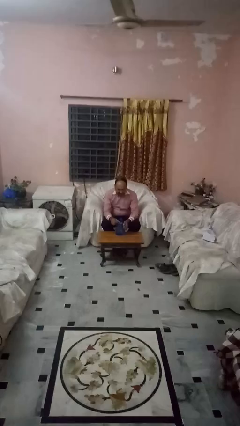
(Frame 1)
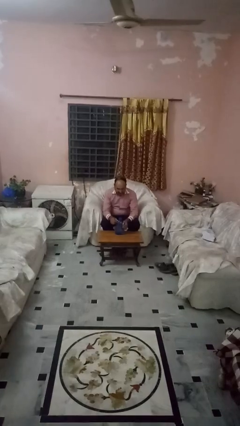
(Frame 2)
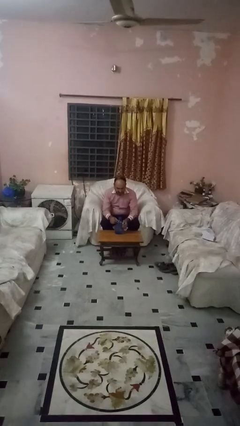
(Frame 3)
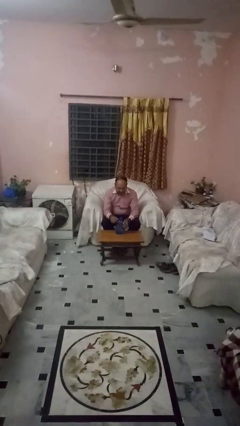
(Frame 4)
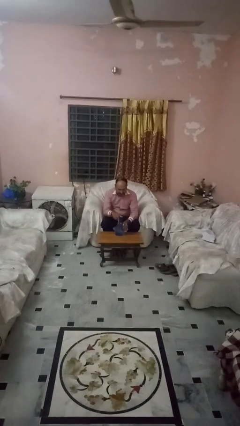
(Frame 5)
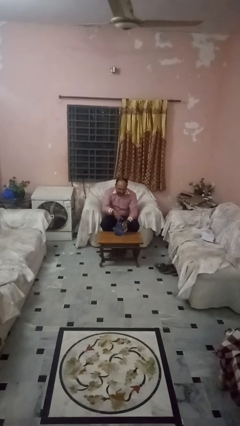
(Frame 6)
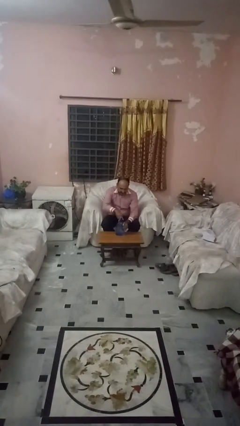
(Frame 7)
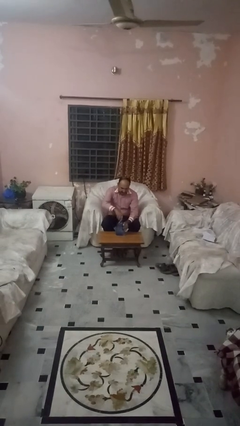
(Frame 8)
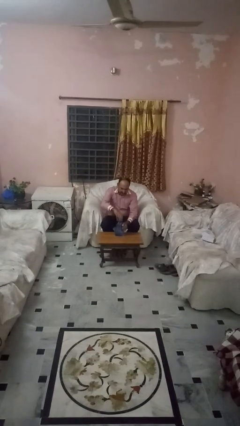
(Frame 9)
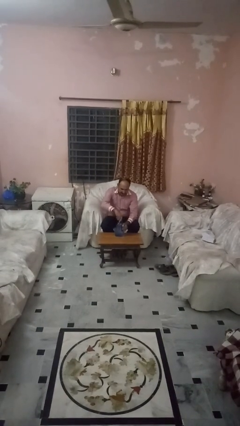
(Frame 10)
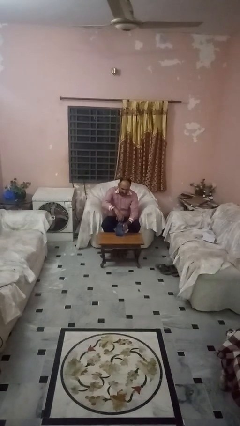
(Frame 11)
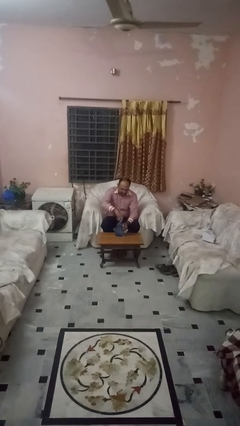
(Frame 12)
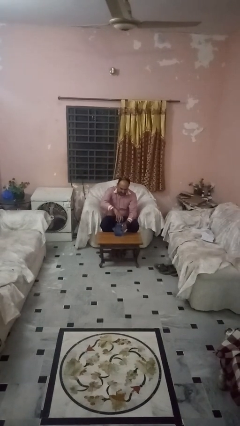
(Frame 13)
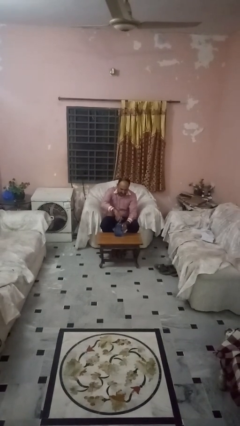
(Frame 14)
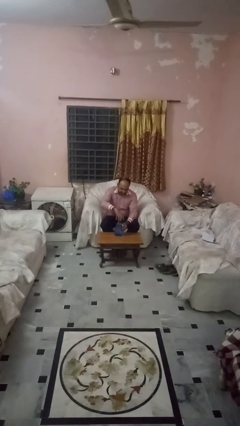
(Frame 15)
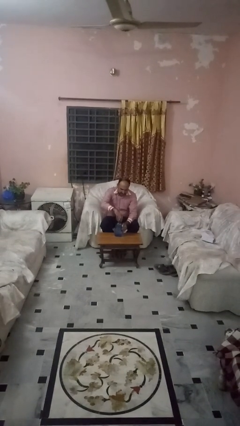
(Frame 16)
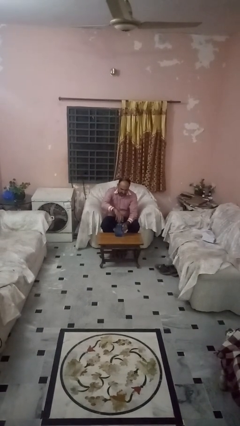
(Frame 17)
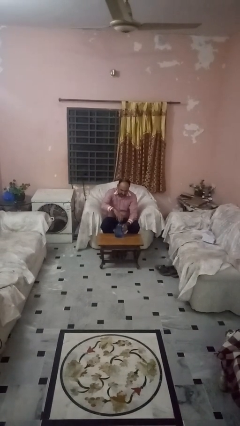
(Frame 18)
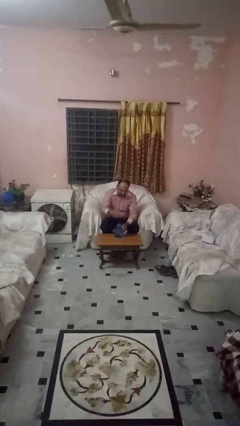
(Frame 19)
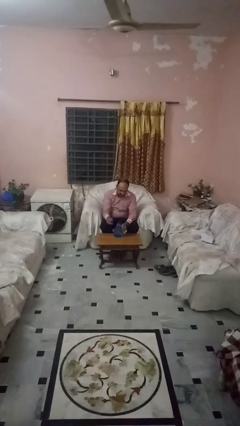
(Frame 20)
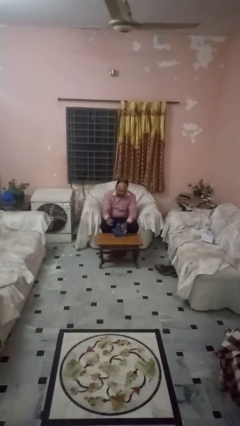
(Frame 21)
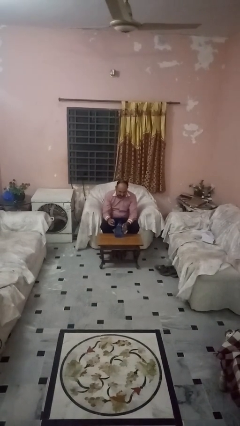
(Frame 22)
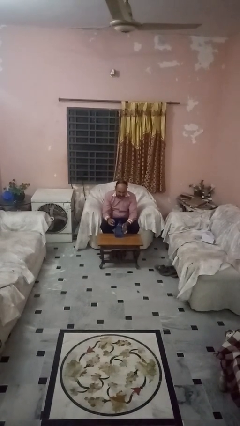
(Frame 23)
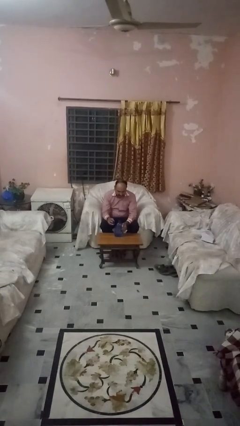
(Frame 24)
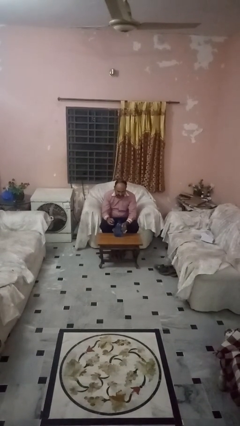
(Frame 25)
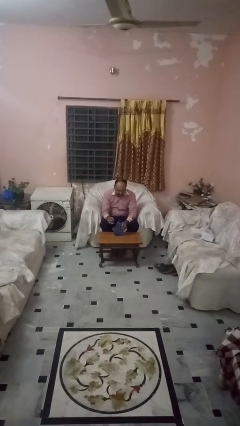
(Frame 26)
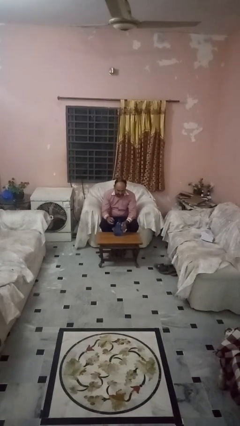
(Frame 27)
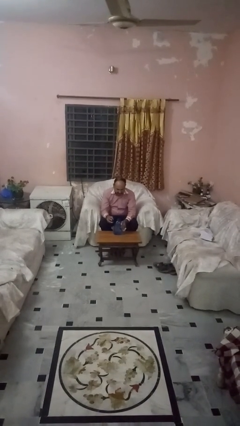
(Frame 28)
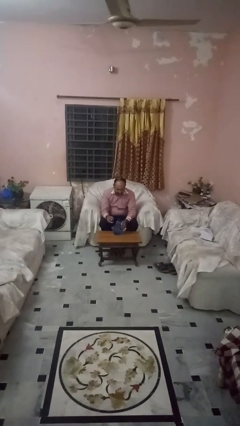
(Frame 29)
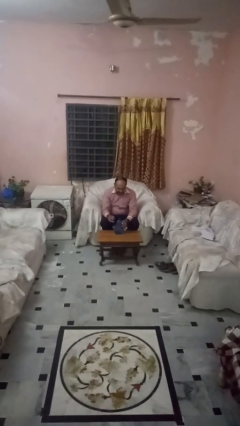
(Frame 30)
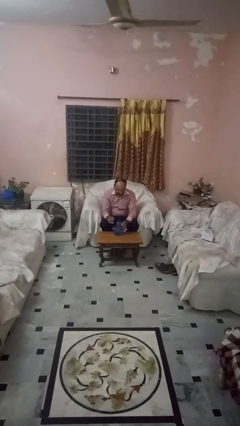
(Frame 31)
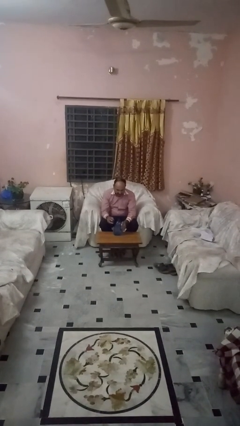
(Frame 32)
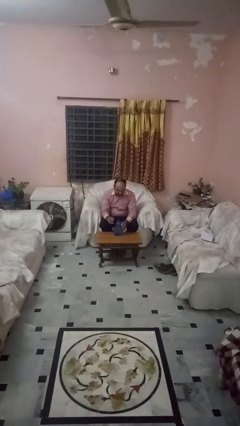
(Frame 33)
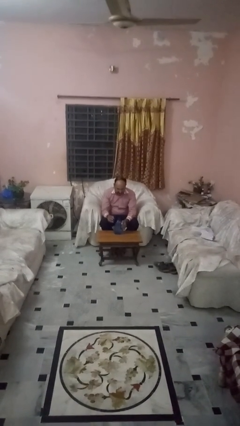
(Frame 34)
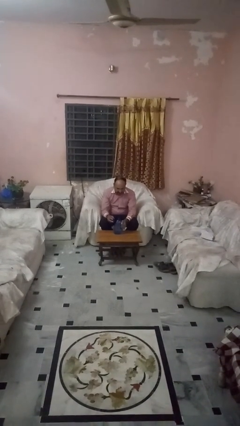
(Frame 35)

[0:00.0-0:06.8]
person unscrews lid from bottle

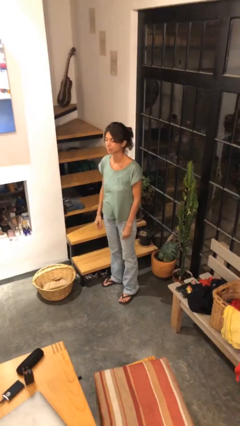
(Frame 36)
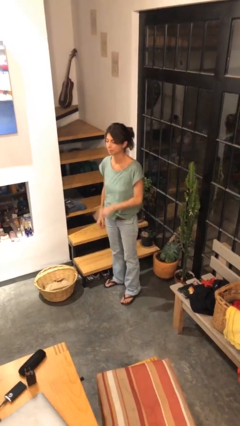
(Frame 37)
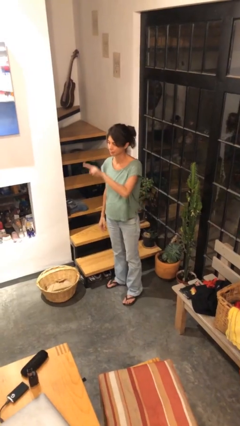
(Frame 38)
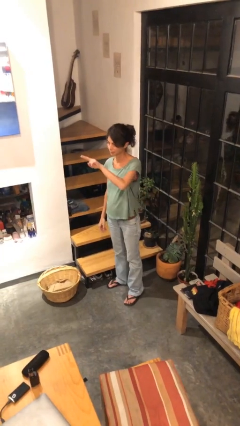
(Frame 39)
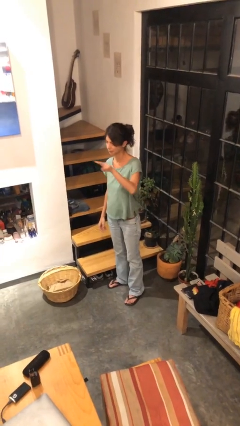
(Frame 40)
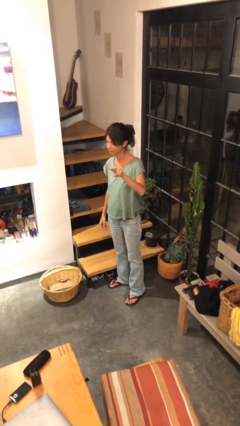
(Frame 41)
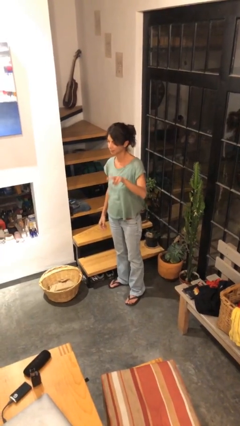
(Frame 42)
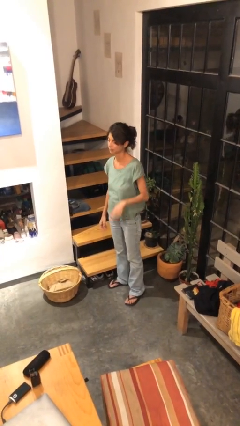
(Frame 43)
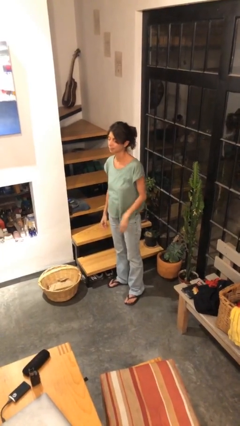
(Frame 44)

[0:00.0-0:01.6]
person gestures swipe left

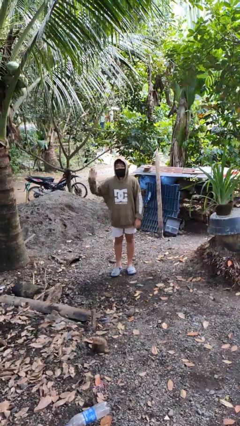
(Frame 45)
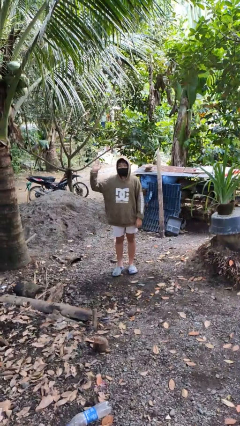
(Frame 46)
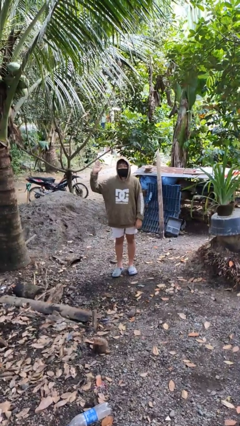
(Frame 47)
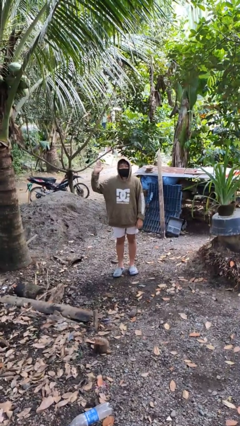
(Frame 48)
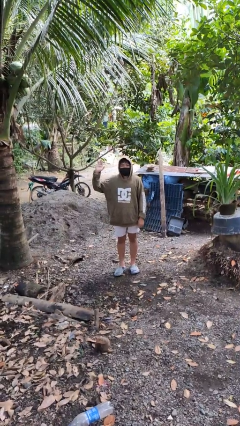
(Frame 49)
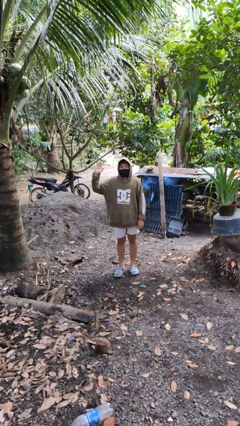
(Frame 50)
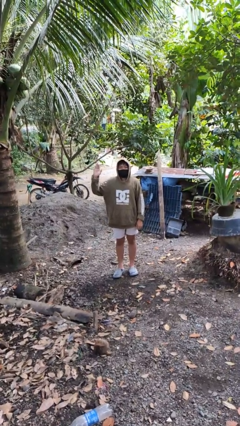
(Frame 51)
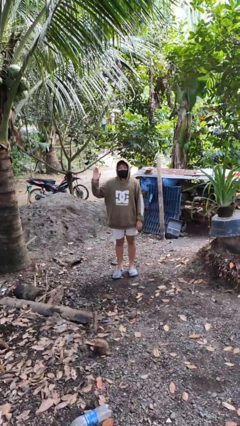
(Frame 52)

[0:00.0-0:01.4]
person gestures number five

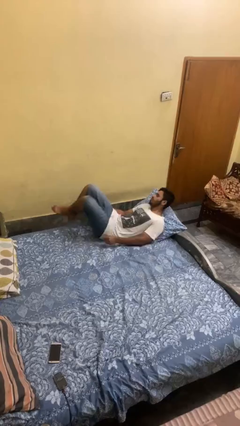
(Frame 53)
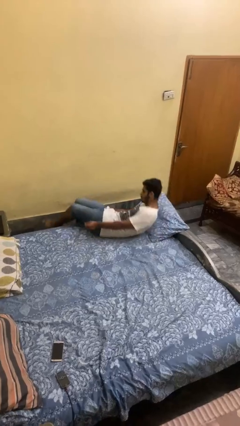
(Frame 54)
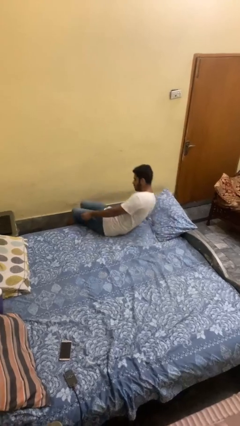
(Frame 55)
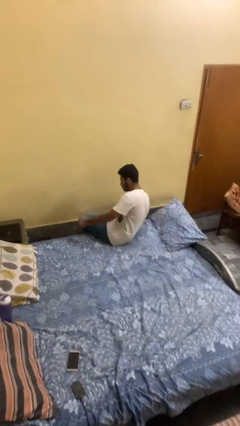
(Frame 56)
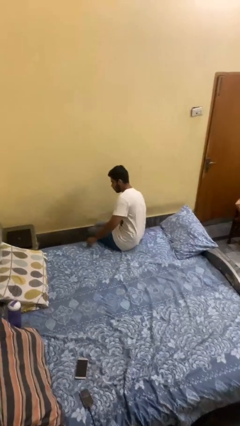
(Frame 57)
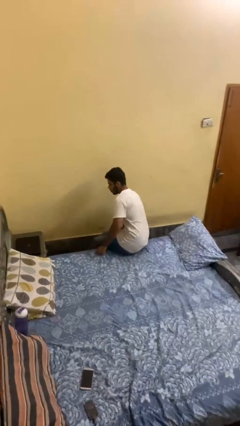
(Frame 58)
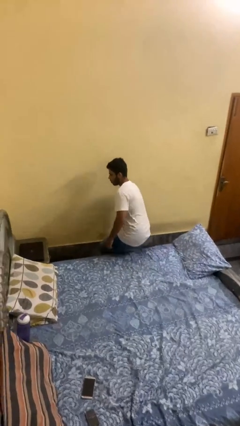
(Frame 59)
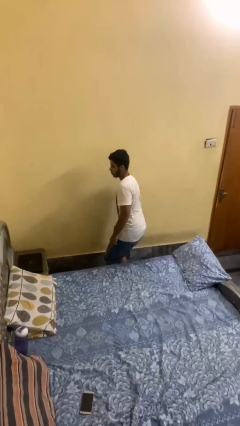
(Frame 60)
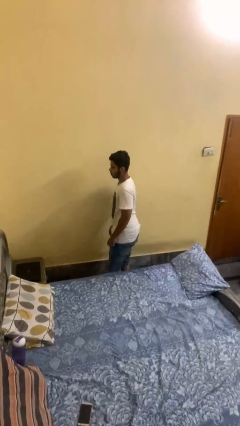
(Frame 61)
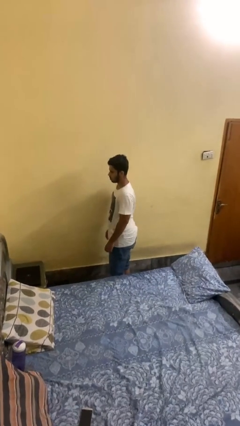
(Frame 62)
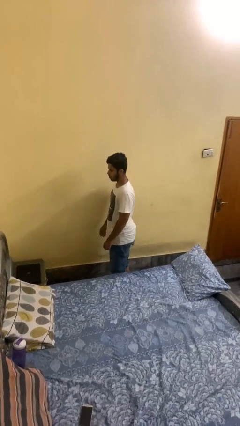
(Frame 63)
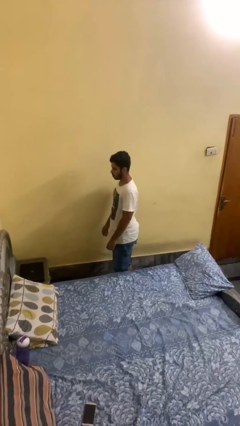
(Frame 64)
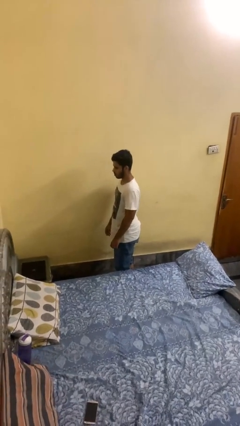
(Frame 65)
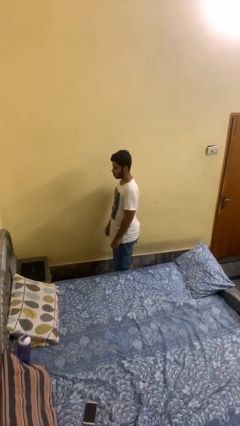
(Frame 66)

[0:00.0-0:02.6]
person stands up

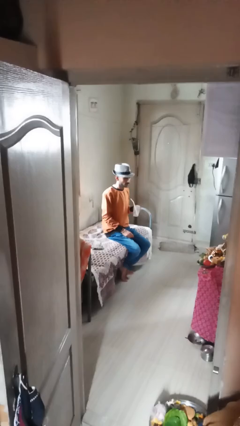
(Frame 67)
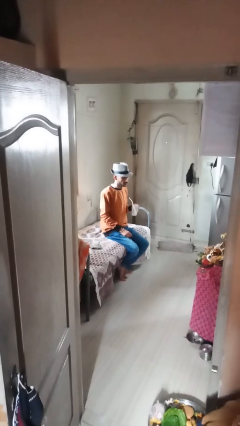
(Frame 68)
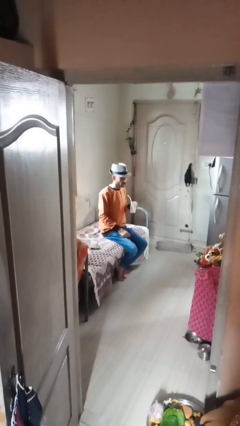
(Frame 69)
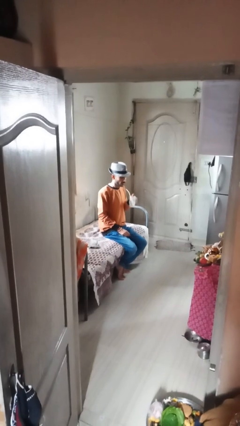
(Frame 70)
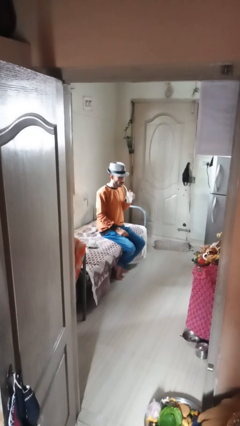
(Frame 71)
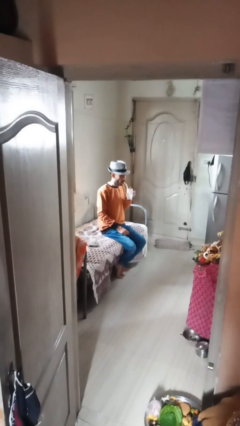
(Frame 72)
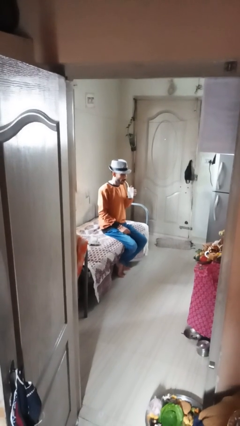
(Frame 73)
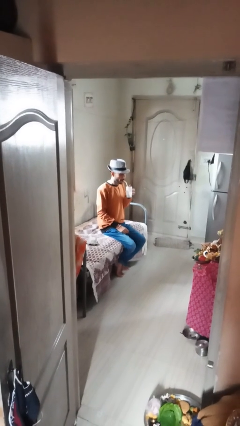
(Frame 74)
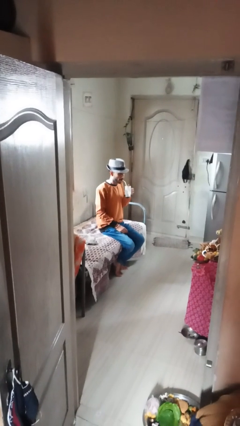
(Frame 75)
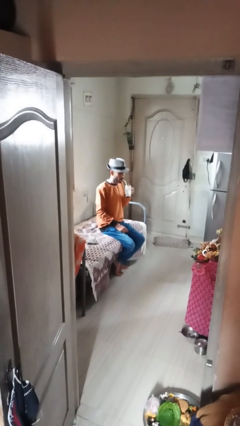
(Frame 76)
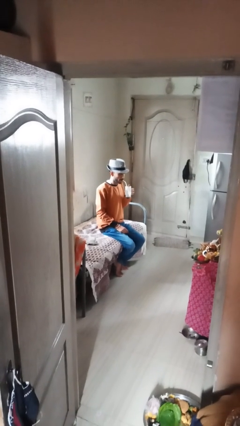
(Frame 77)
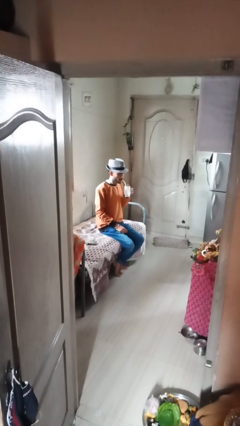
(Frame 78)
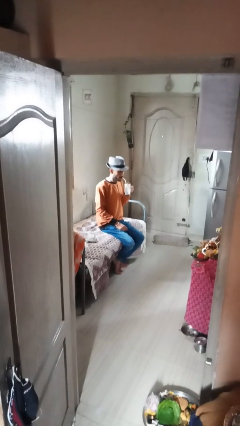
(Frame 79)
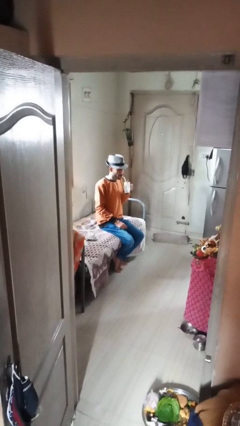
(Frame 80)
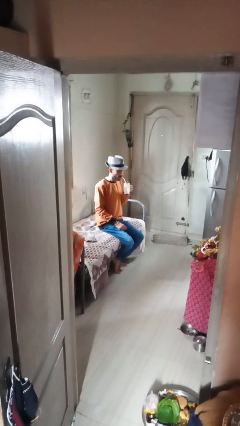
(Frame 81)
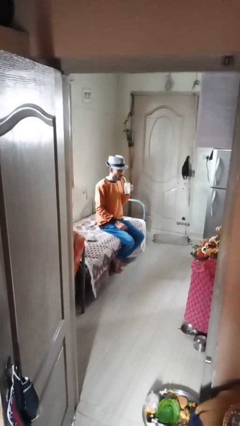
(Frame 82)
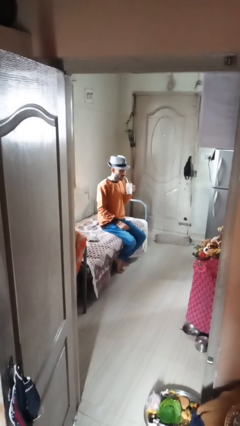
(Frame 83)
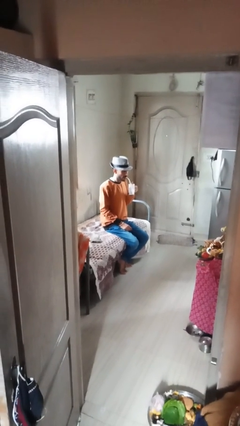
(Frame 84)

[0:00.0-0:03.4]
person drinks from straw

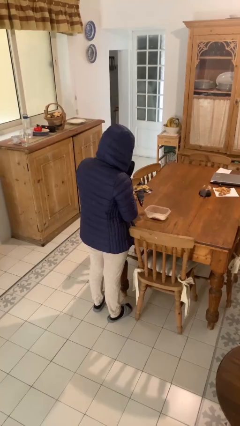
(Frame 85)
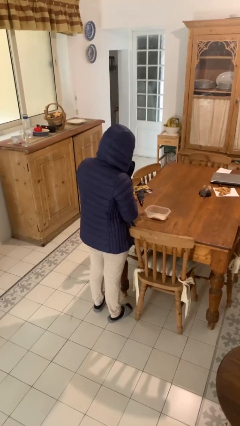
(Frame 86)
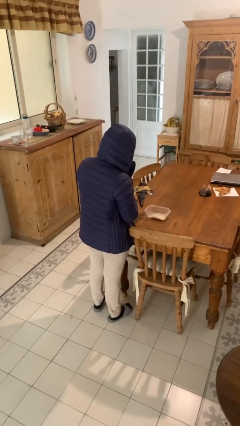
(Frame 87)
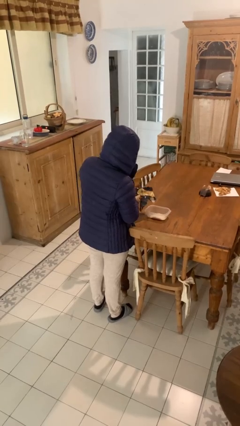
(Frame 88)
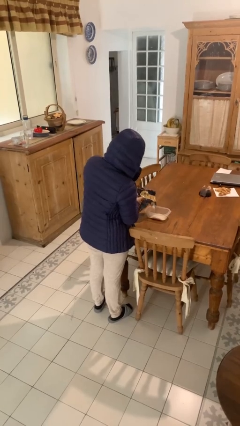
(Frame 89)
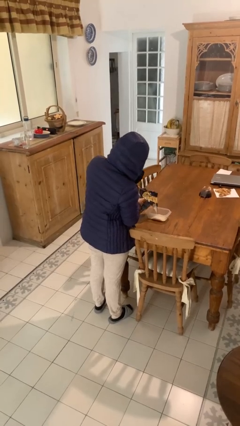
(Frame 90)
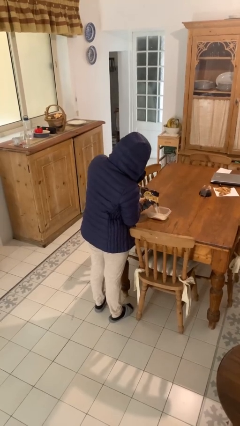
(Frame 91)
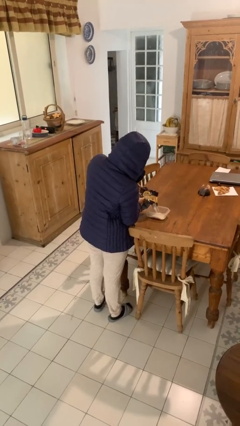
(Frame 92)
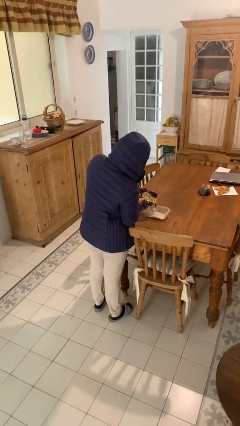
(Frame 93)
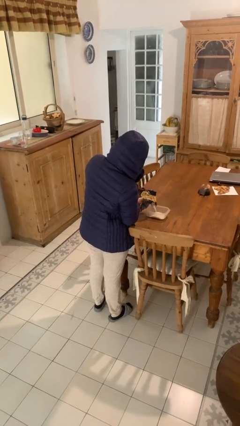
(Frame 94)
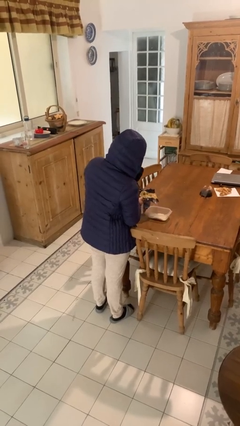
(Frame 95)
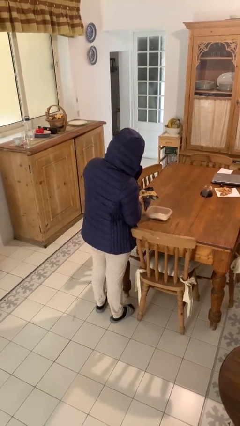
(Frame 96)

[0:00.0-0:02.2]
person pours into bowl
